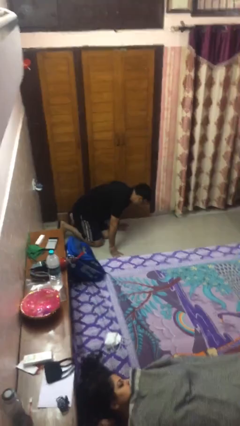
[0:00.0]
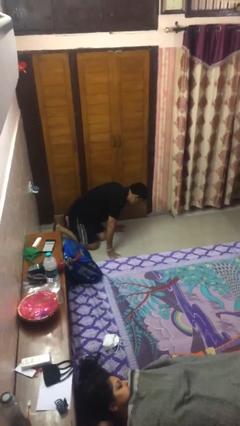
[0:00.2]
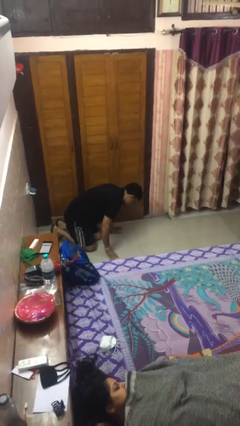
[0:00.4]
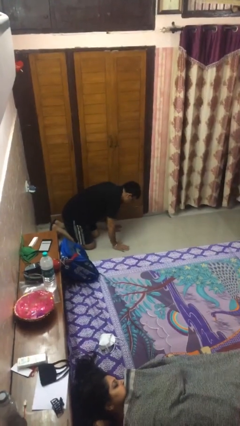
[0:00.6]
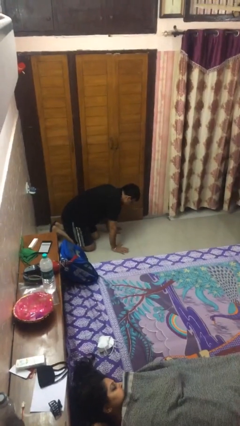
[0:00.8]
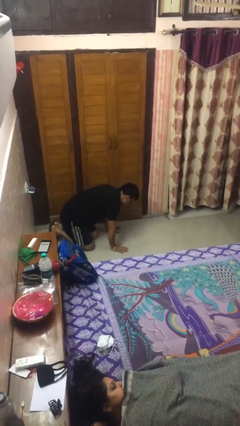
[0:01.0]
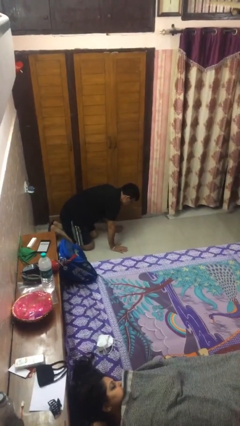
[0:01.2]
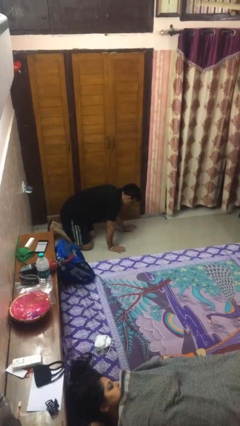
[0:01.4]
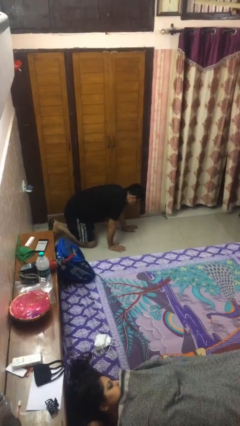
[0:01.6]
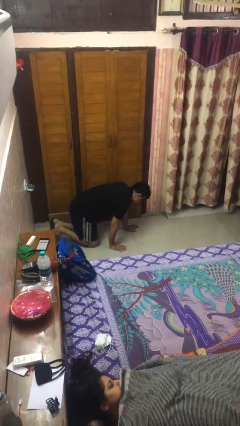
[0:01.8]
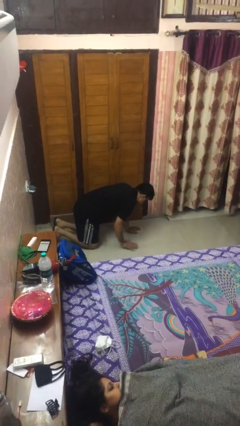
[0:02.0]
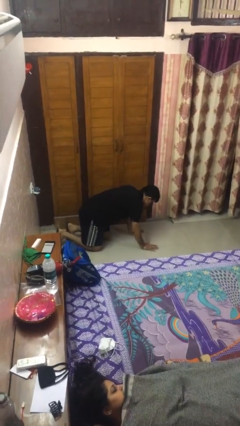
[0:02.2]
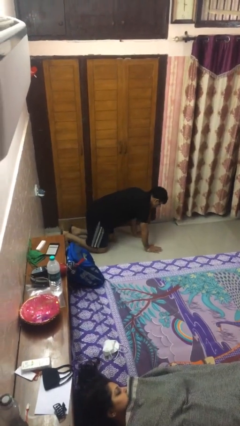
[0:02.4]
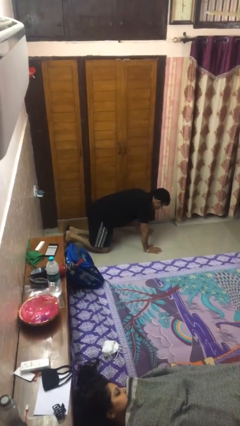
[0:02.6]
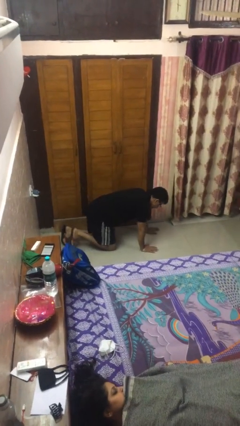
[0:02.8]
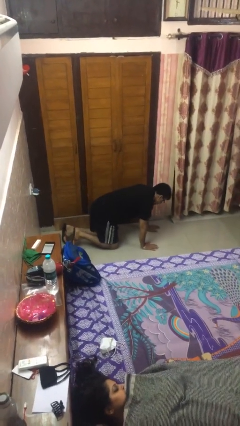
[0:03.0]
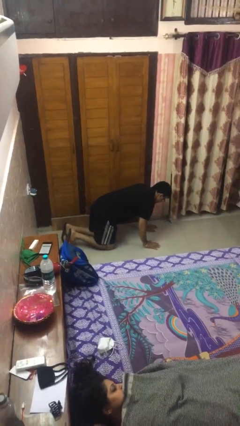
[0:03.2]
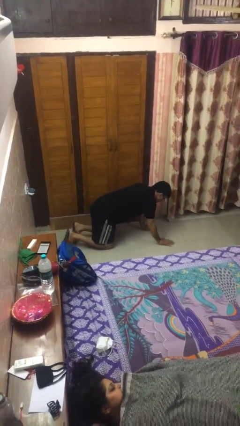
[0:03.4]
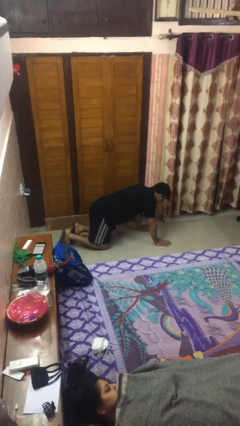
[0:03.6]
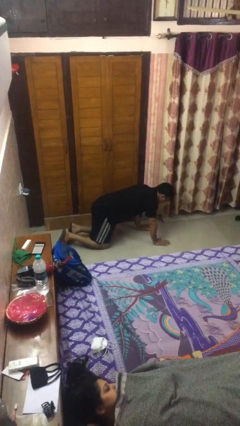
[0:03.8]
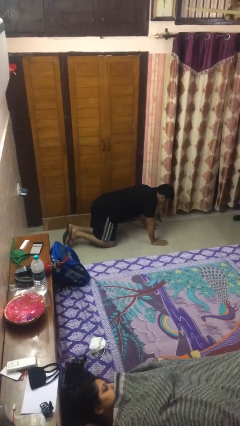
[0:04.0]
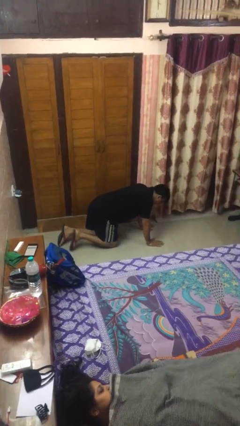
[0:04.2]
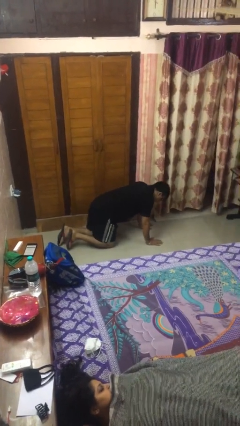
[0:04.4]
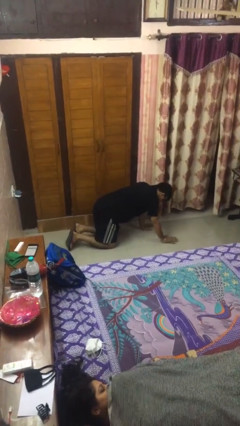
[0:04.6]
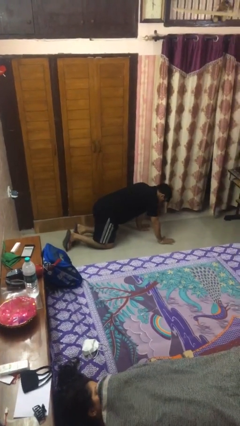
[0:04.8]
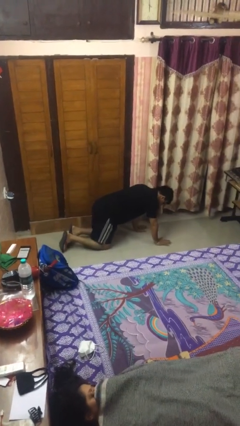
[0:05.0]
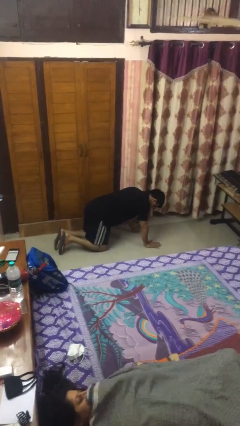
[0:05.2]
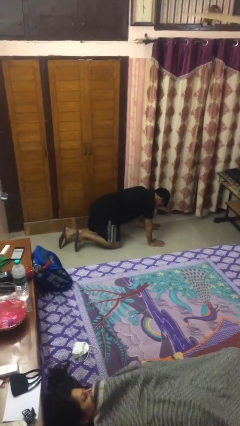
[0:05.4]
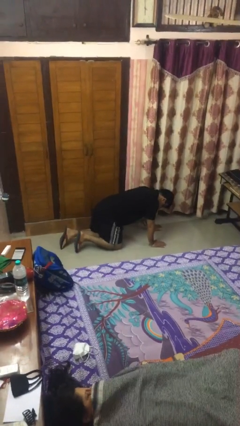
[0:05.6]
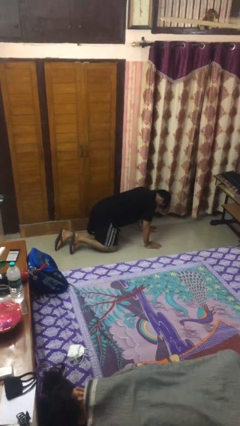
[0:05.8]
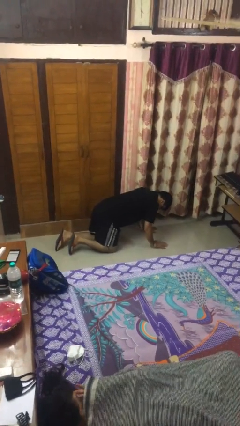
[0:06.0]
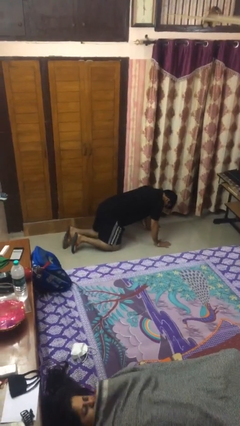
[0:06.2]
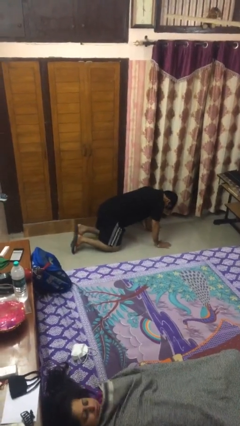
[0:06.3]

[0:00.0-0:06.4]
person crawls

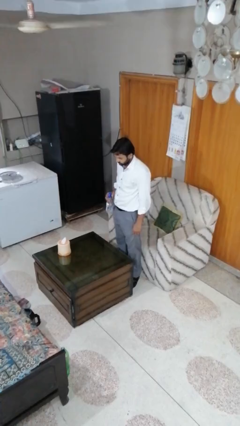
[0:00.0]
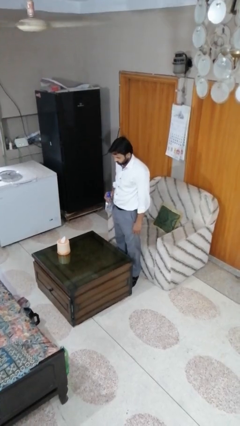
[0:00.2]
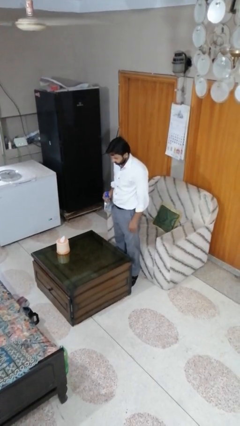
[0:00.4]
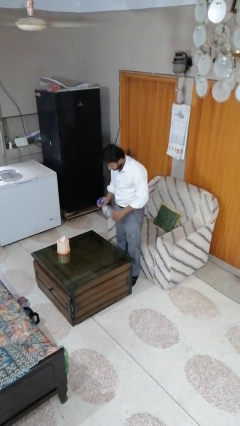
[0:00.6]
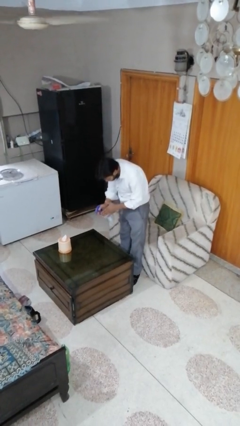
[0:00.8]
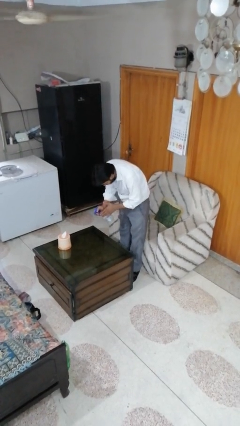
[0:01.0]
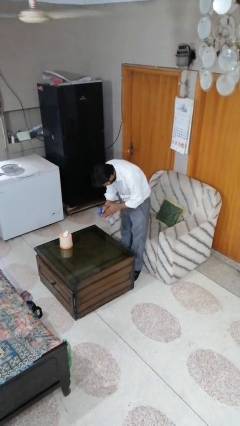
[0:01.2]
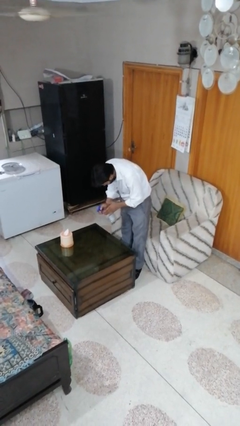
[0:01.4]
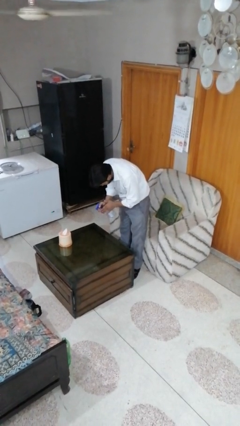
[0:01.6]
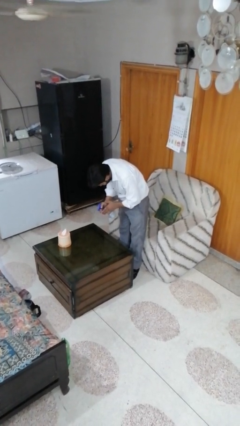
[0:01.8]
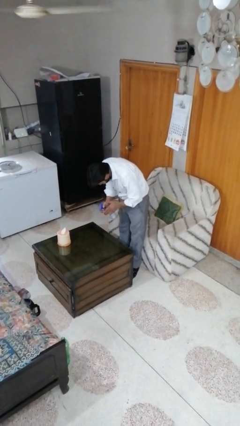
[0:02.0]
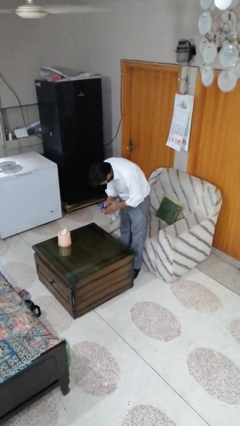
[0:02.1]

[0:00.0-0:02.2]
person sprays from bottle

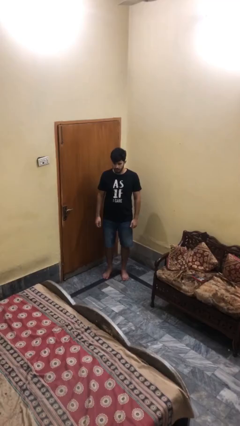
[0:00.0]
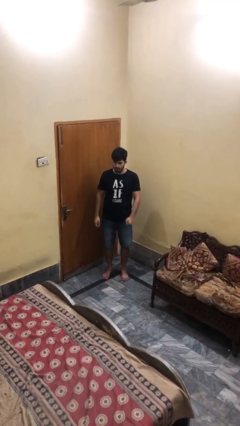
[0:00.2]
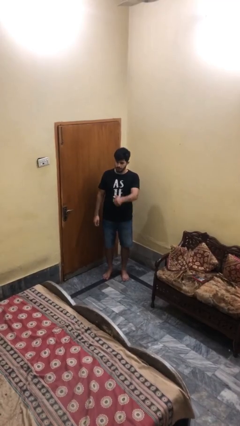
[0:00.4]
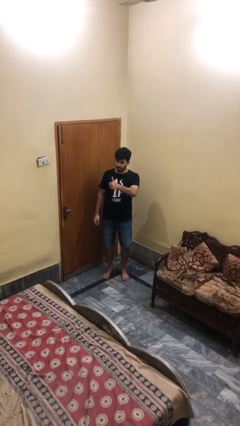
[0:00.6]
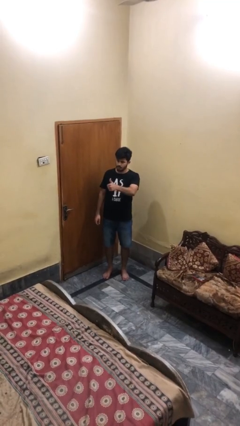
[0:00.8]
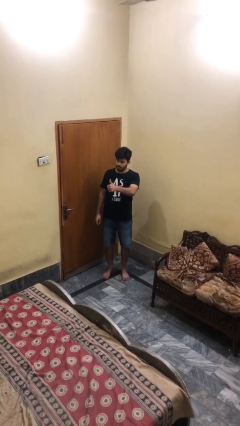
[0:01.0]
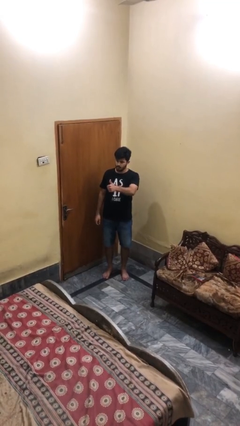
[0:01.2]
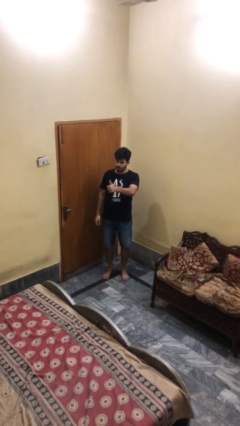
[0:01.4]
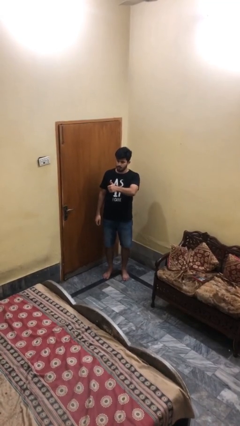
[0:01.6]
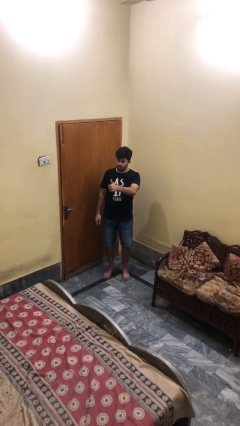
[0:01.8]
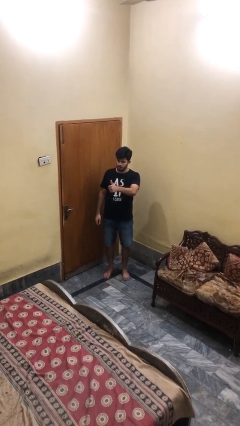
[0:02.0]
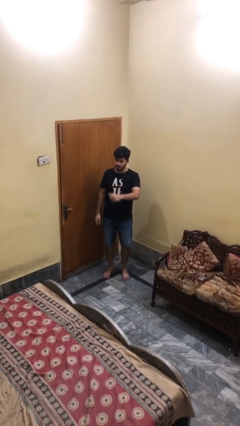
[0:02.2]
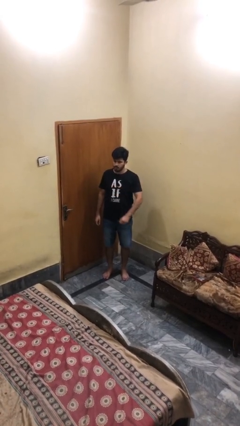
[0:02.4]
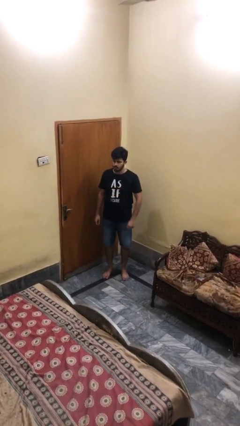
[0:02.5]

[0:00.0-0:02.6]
person gestures thumbs up

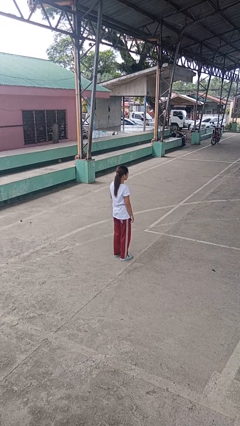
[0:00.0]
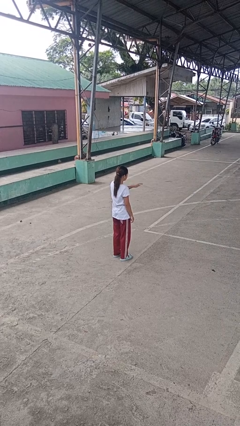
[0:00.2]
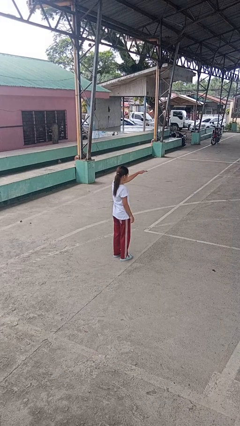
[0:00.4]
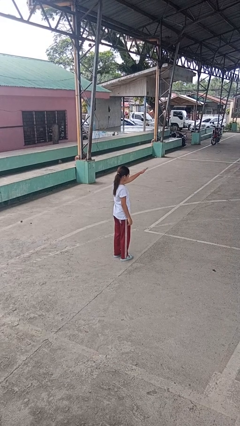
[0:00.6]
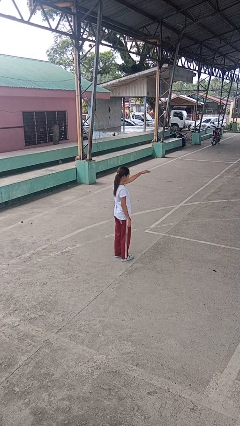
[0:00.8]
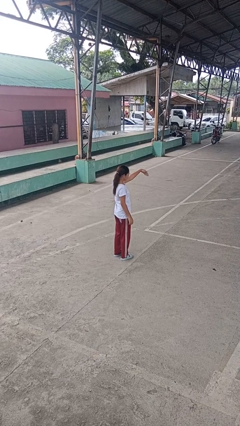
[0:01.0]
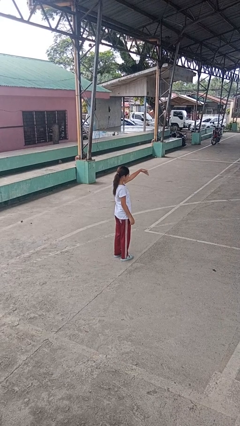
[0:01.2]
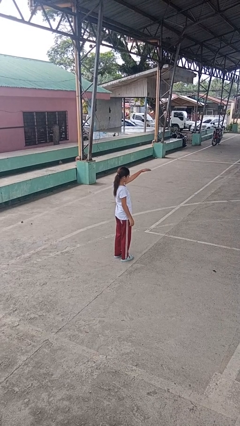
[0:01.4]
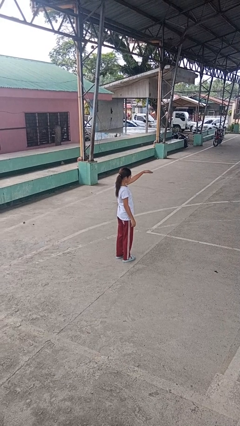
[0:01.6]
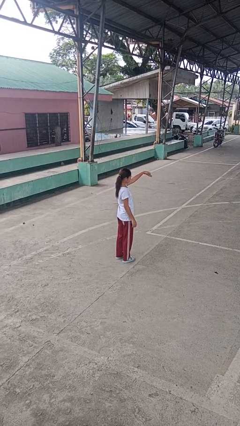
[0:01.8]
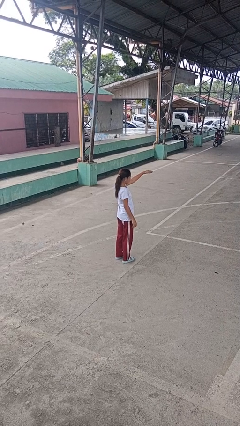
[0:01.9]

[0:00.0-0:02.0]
person gestures come here

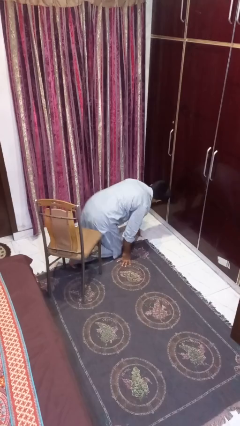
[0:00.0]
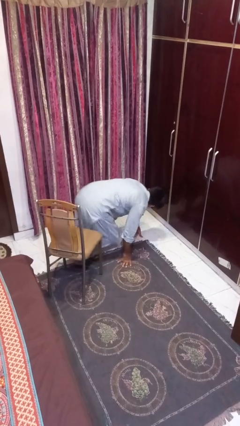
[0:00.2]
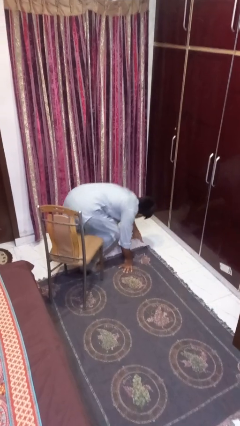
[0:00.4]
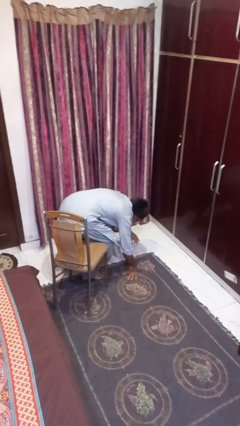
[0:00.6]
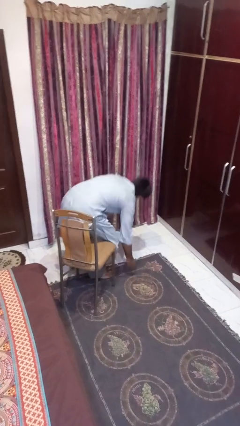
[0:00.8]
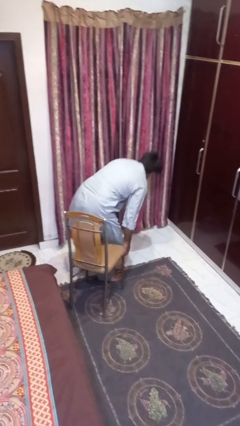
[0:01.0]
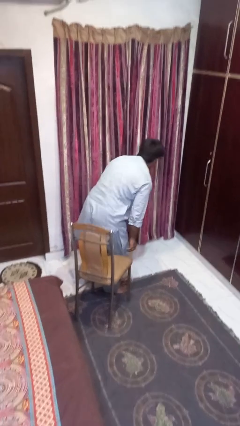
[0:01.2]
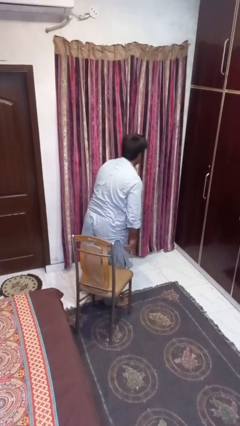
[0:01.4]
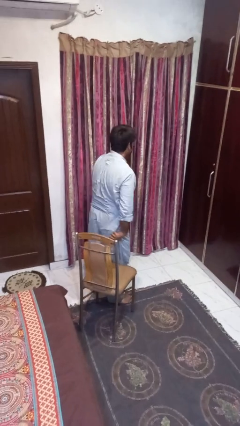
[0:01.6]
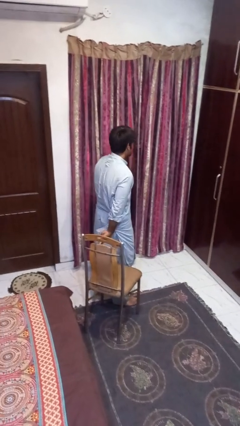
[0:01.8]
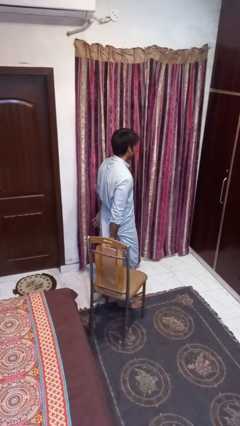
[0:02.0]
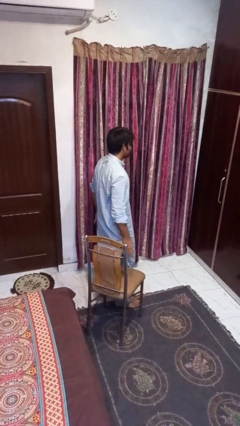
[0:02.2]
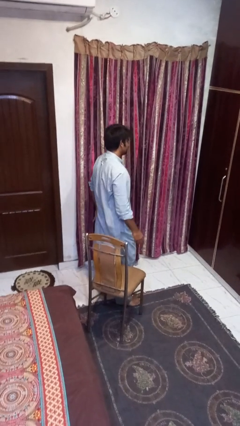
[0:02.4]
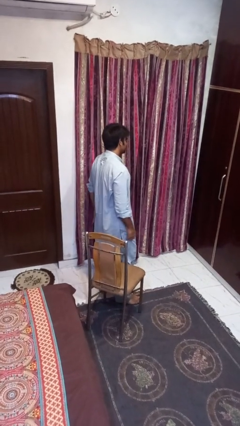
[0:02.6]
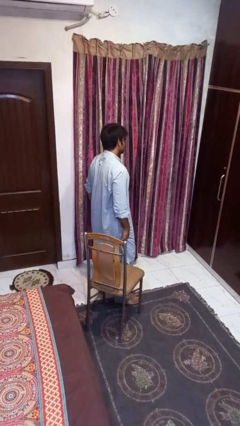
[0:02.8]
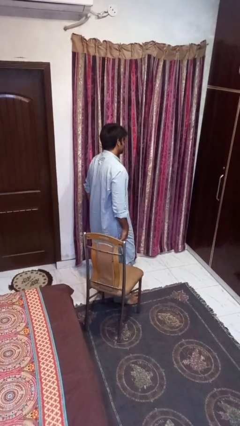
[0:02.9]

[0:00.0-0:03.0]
person stands up from floor

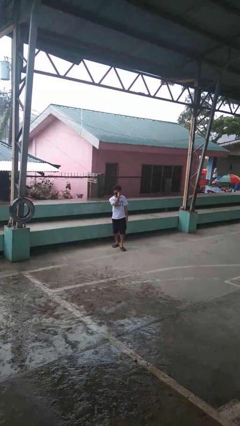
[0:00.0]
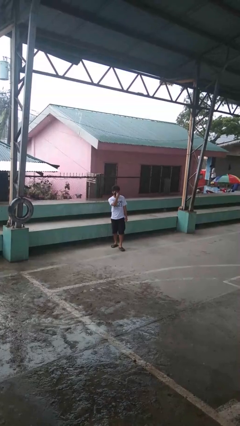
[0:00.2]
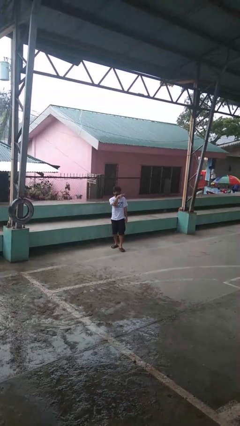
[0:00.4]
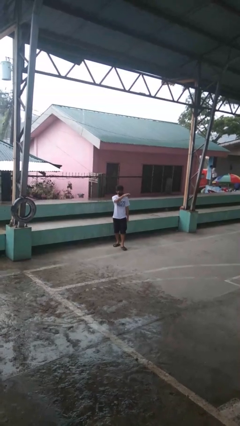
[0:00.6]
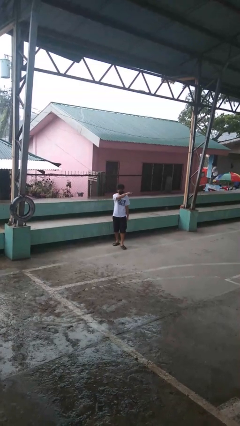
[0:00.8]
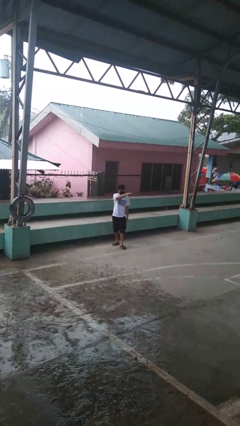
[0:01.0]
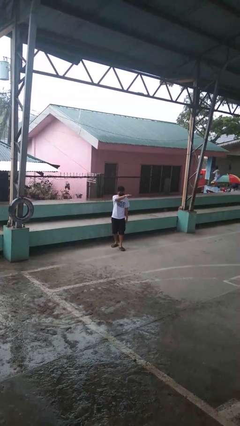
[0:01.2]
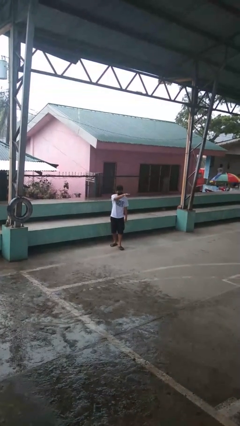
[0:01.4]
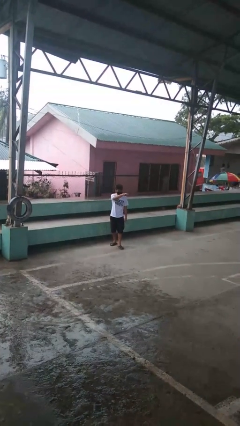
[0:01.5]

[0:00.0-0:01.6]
person gestures watch closely
